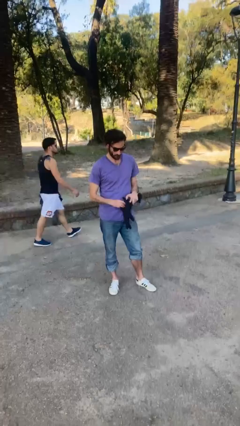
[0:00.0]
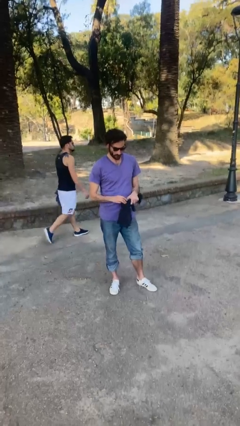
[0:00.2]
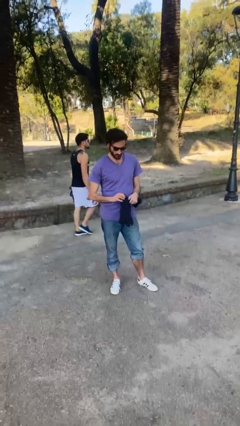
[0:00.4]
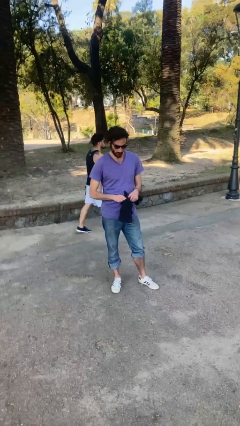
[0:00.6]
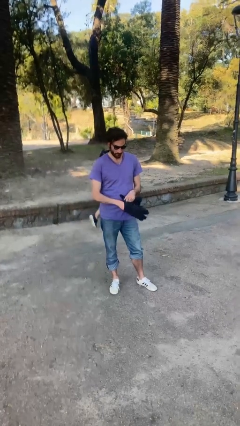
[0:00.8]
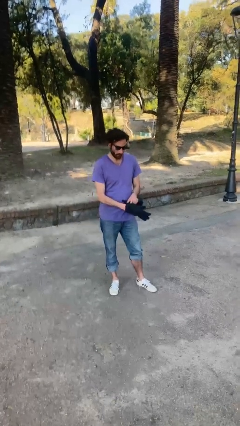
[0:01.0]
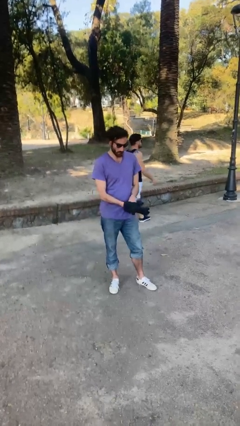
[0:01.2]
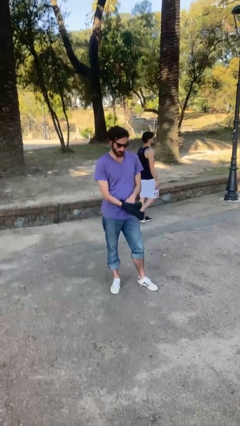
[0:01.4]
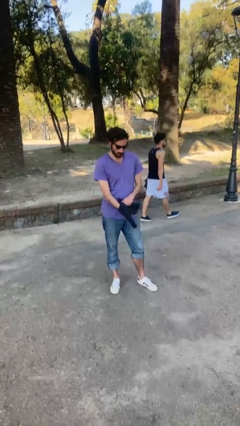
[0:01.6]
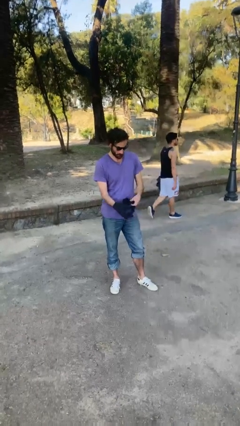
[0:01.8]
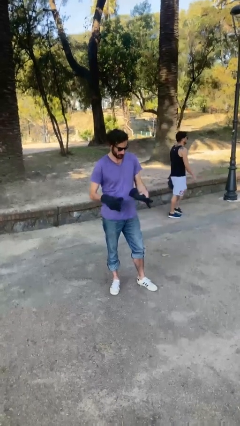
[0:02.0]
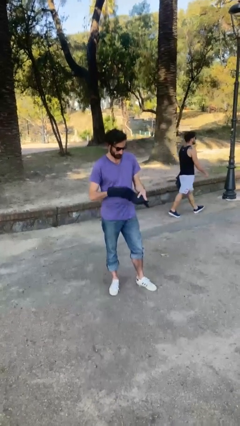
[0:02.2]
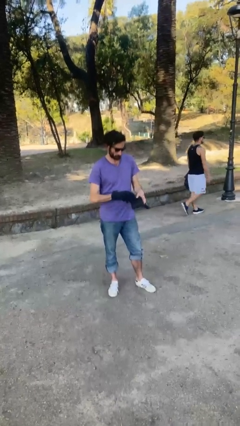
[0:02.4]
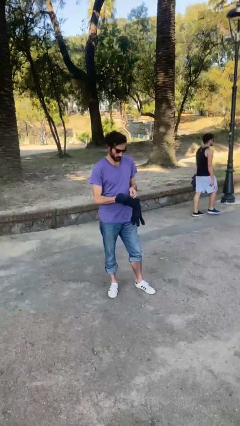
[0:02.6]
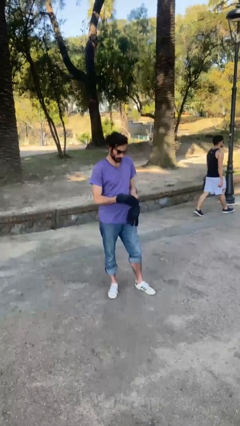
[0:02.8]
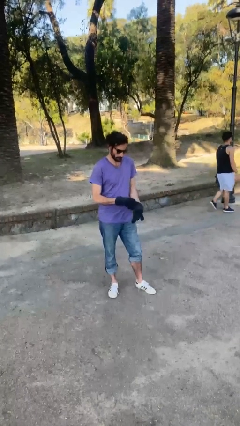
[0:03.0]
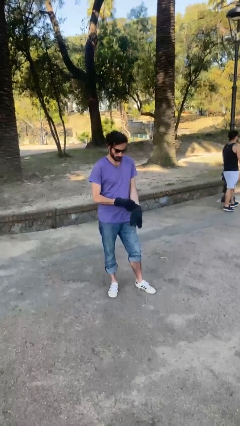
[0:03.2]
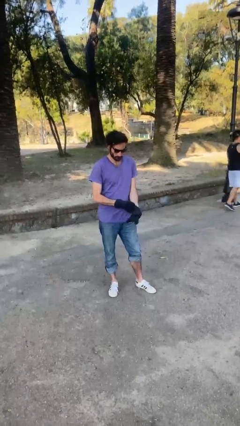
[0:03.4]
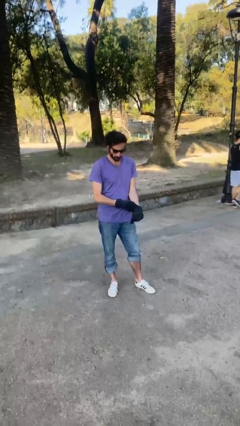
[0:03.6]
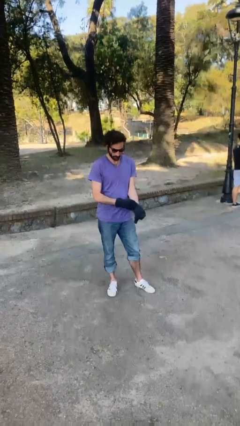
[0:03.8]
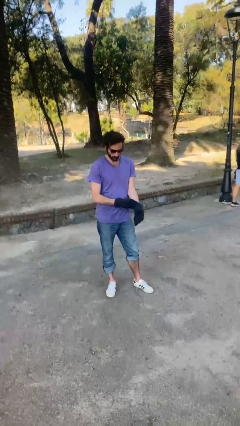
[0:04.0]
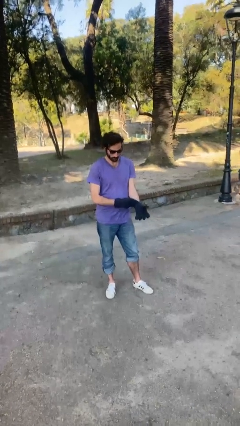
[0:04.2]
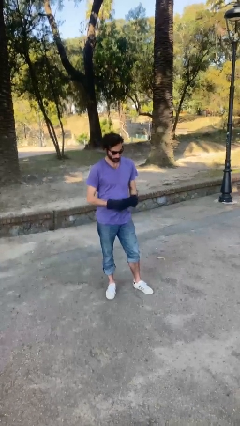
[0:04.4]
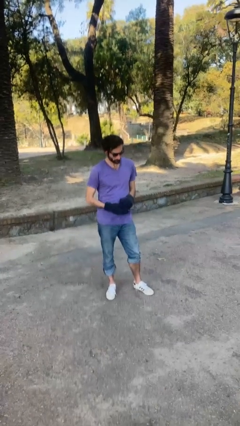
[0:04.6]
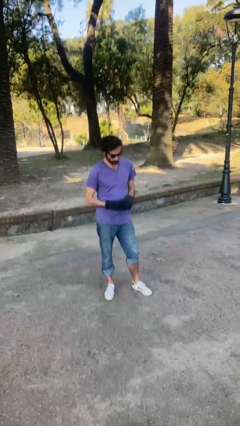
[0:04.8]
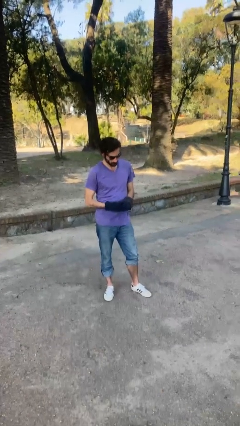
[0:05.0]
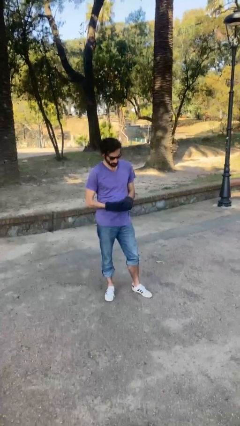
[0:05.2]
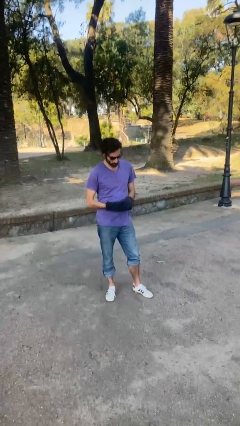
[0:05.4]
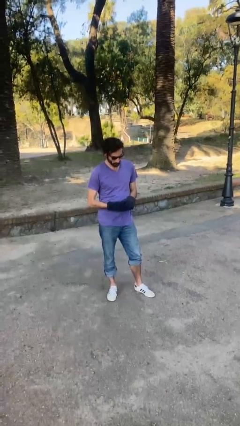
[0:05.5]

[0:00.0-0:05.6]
person puts on gloves

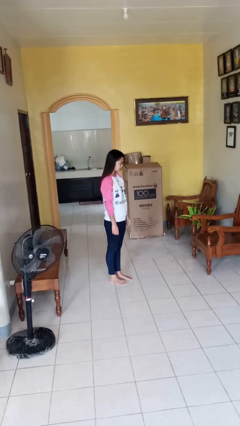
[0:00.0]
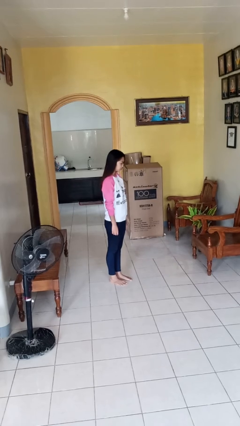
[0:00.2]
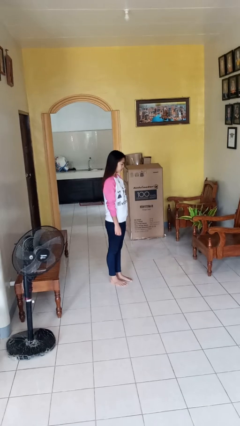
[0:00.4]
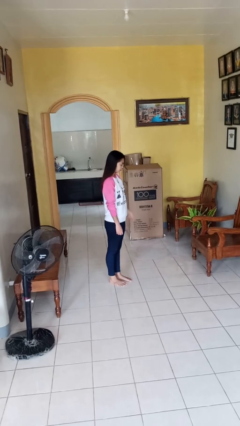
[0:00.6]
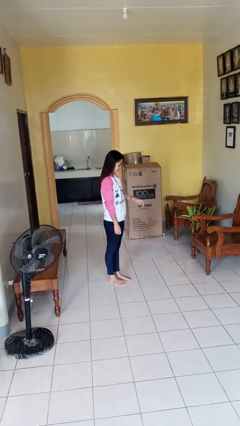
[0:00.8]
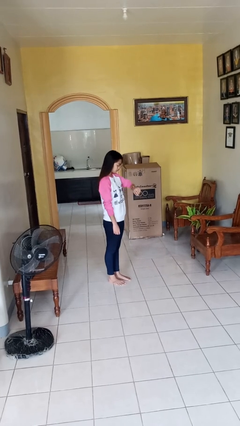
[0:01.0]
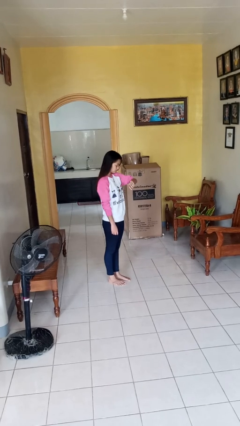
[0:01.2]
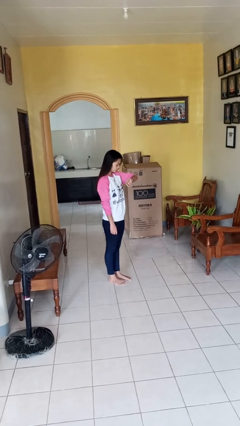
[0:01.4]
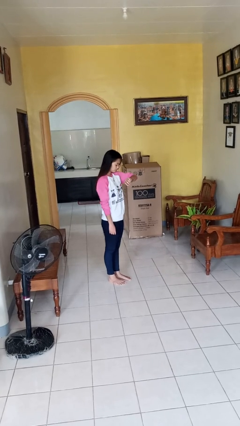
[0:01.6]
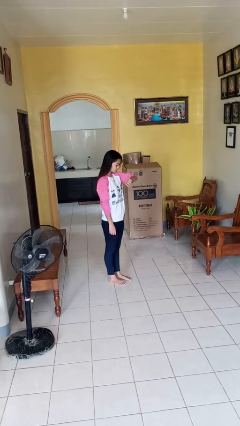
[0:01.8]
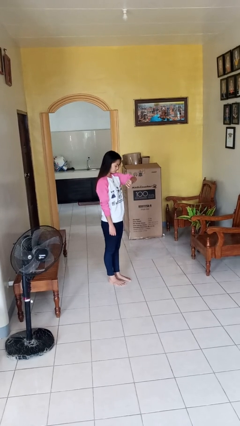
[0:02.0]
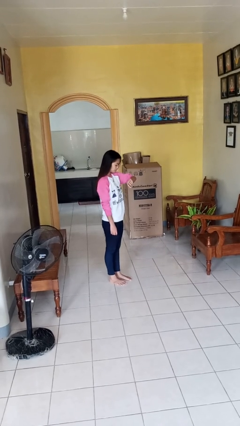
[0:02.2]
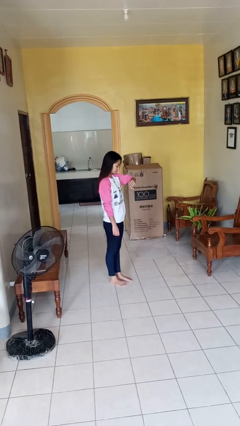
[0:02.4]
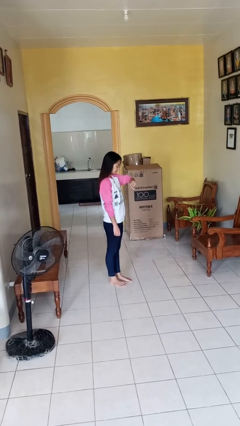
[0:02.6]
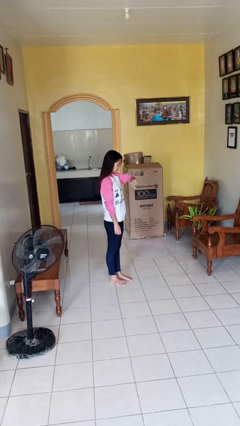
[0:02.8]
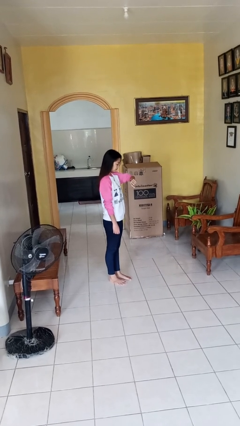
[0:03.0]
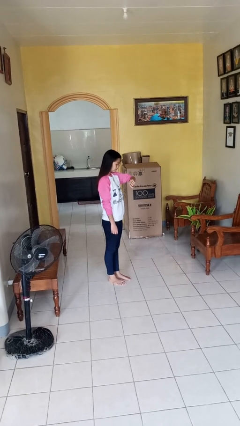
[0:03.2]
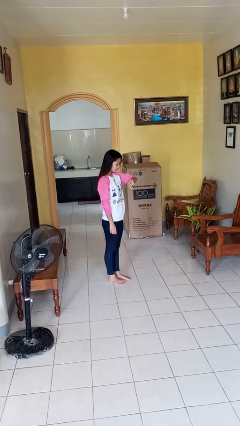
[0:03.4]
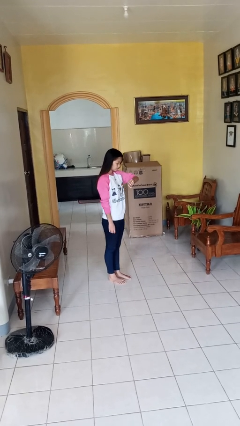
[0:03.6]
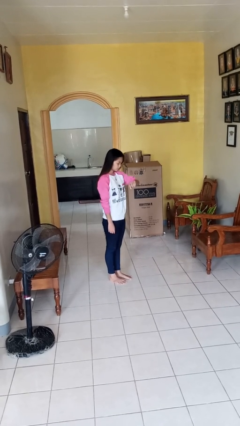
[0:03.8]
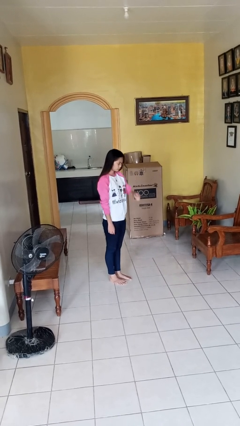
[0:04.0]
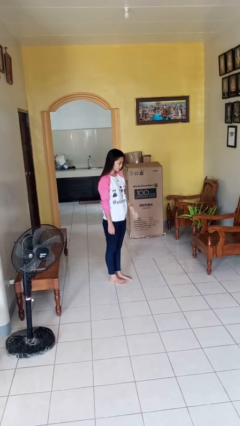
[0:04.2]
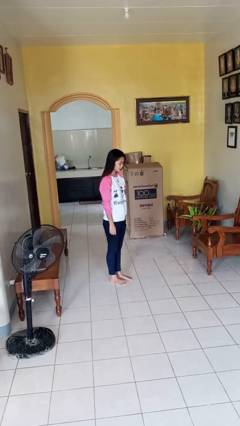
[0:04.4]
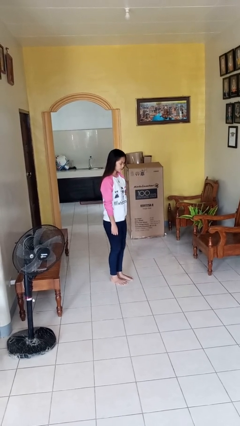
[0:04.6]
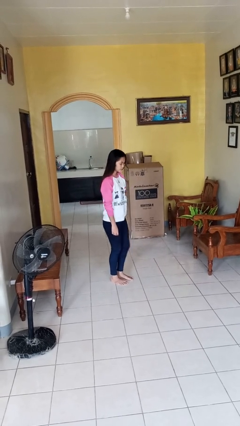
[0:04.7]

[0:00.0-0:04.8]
person looks at wristwatch

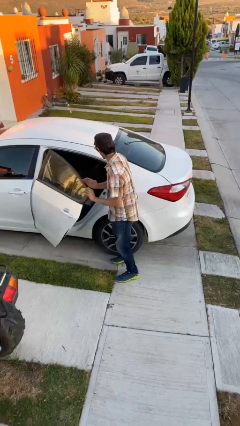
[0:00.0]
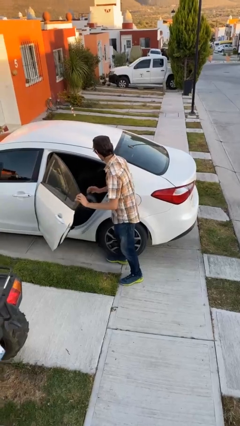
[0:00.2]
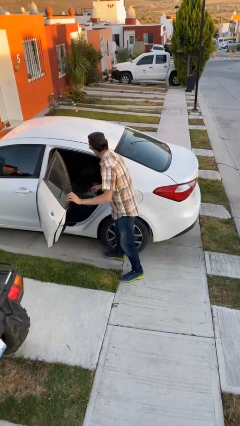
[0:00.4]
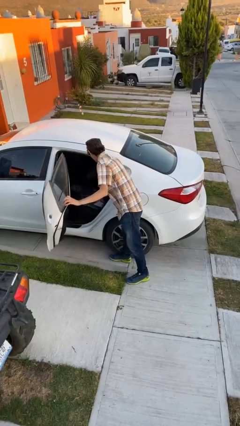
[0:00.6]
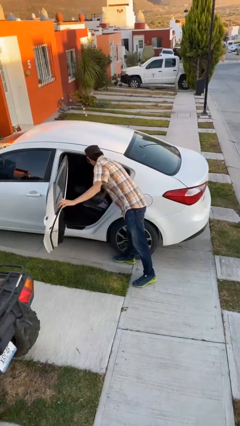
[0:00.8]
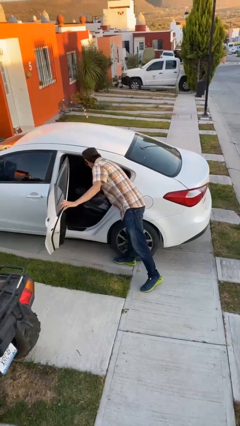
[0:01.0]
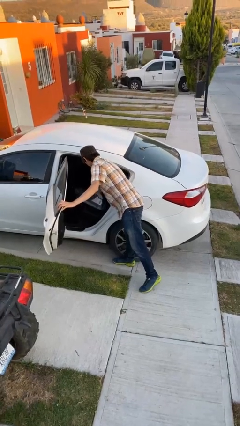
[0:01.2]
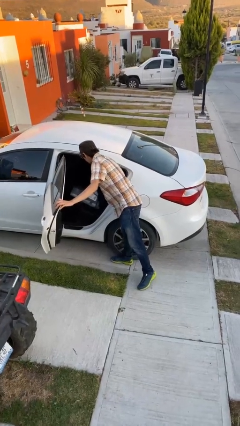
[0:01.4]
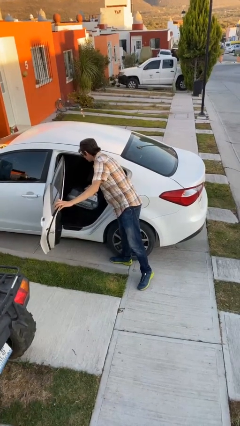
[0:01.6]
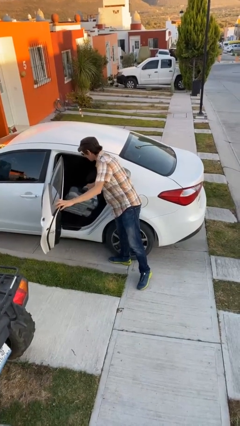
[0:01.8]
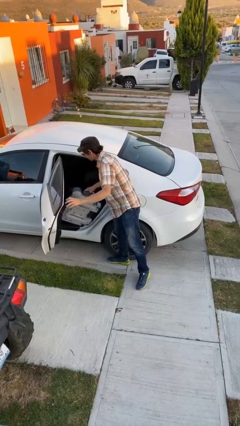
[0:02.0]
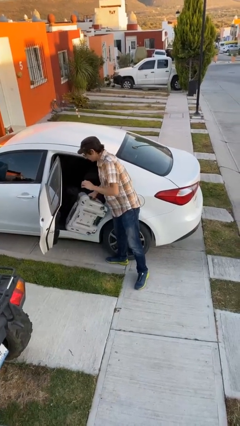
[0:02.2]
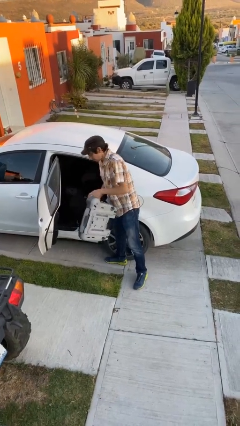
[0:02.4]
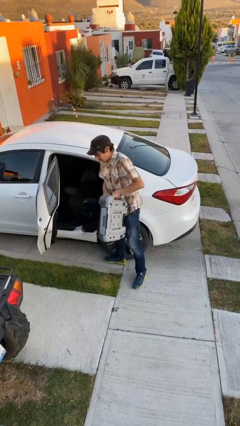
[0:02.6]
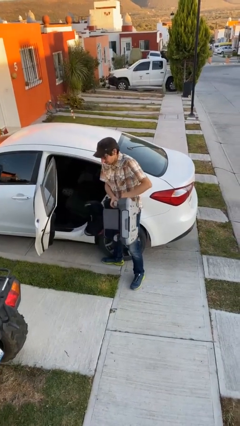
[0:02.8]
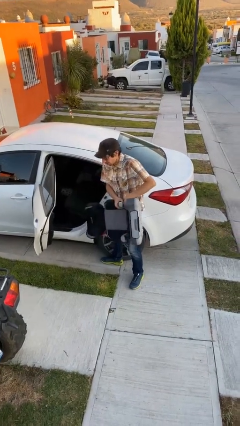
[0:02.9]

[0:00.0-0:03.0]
person unloads car

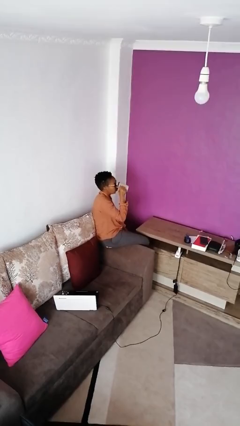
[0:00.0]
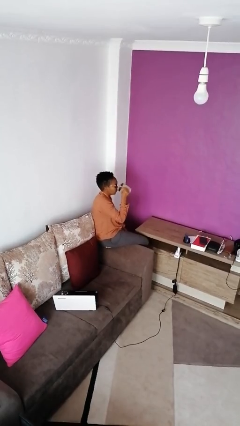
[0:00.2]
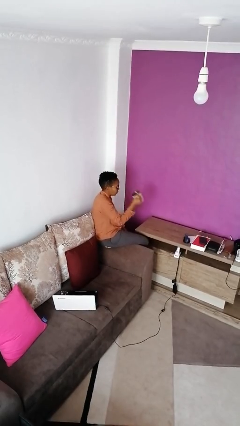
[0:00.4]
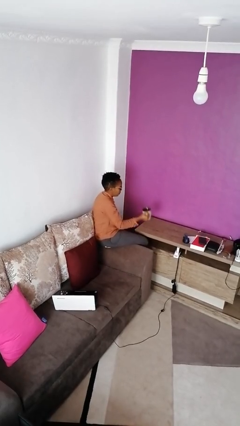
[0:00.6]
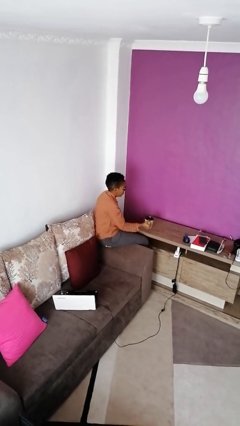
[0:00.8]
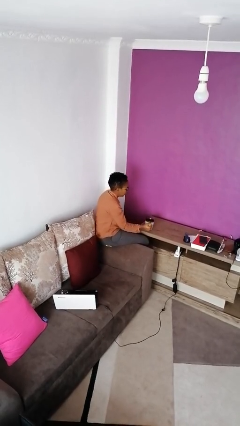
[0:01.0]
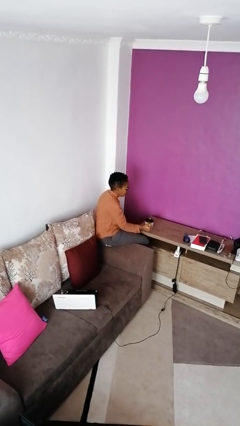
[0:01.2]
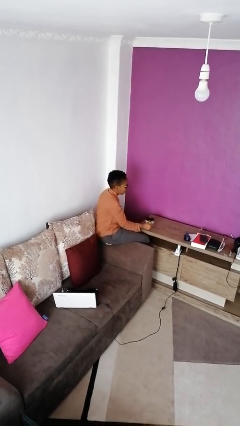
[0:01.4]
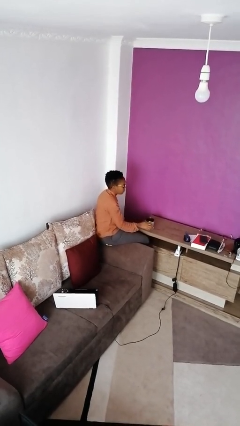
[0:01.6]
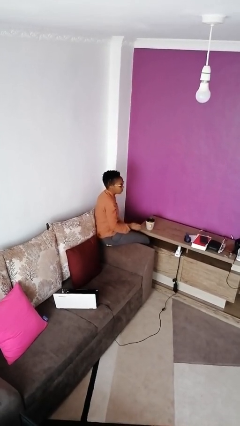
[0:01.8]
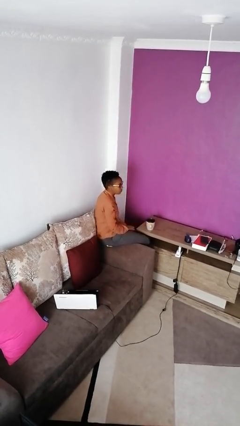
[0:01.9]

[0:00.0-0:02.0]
person puts down object on table

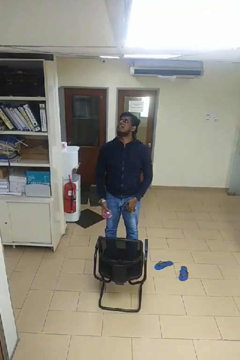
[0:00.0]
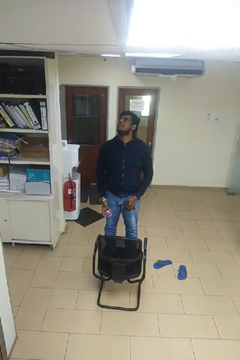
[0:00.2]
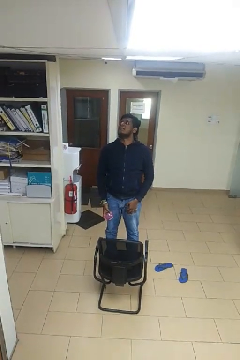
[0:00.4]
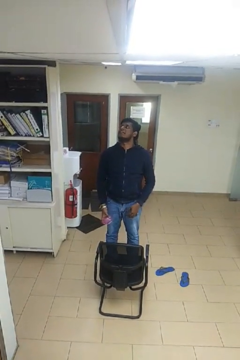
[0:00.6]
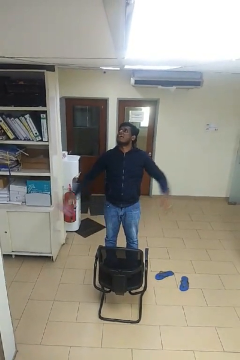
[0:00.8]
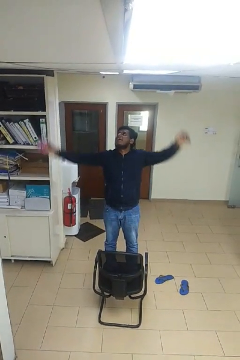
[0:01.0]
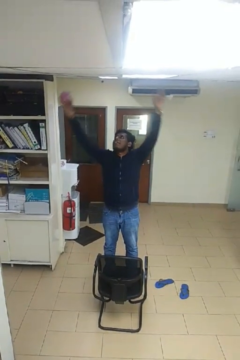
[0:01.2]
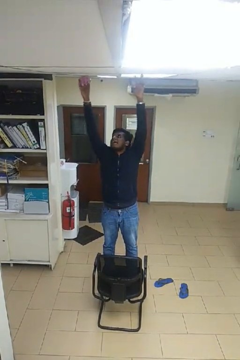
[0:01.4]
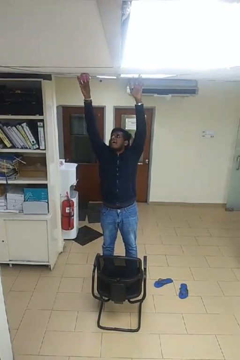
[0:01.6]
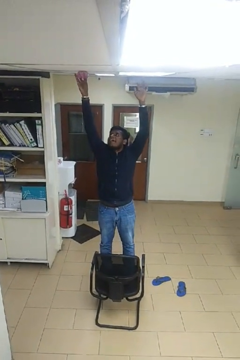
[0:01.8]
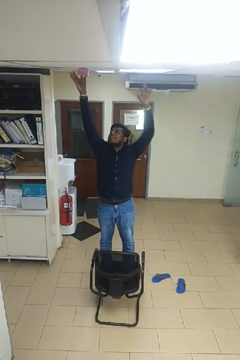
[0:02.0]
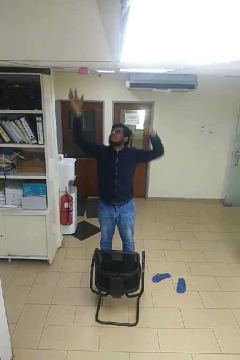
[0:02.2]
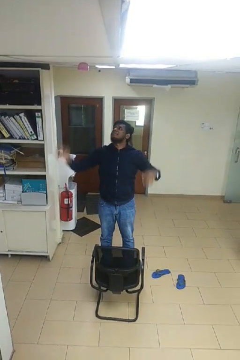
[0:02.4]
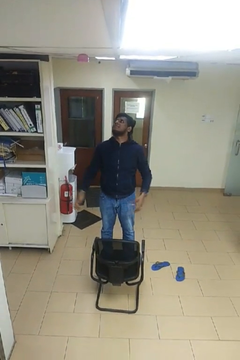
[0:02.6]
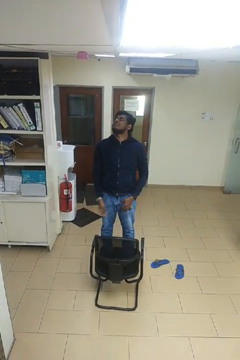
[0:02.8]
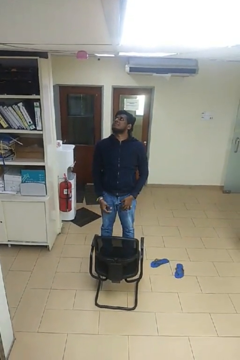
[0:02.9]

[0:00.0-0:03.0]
person puts up smoke detector
